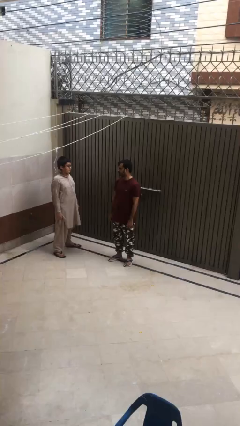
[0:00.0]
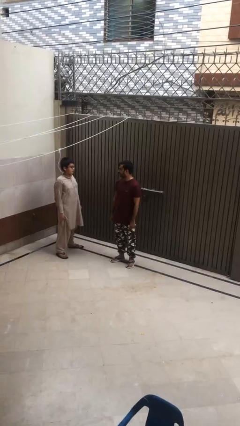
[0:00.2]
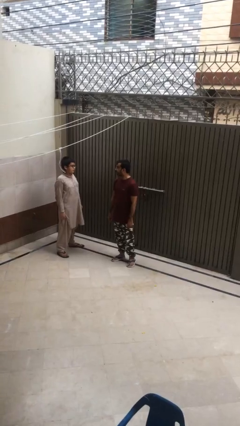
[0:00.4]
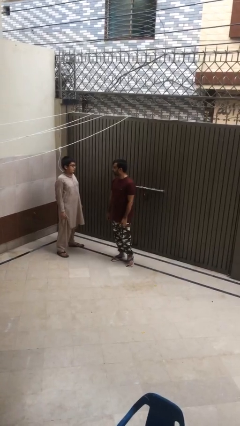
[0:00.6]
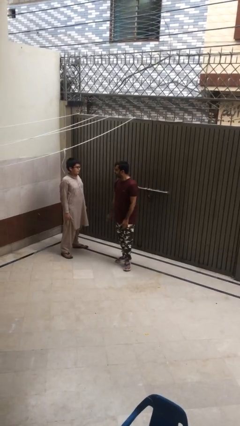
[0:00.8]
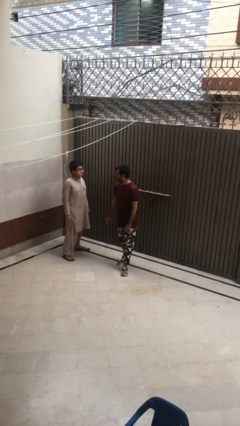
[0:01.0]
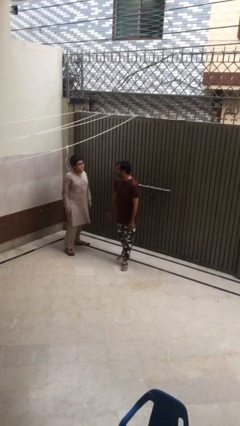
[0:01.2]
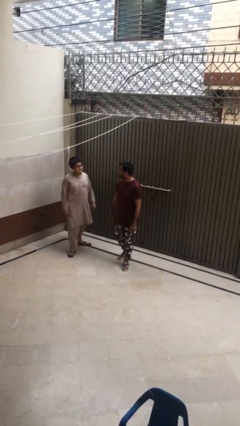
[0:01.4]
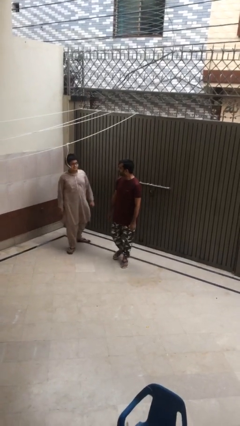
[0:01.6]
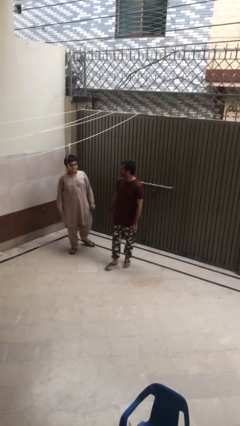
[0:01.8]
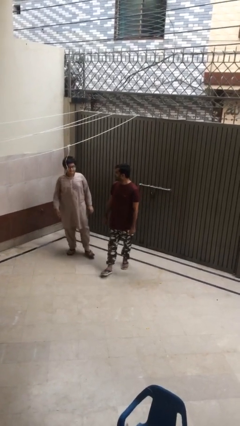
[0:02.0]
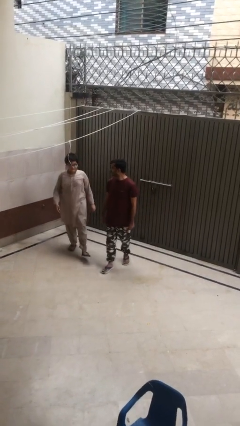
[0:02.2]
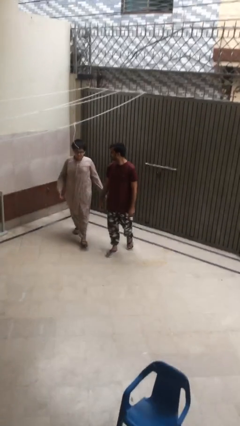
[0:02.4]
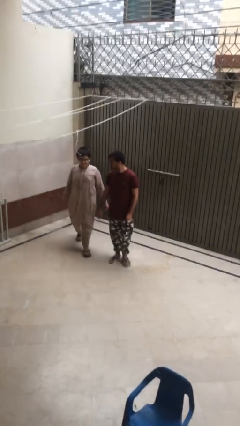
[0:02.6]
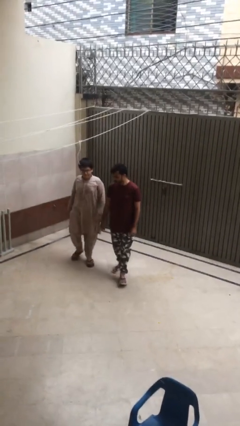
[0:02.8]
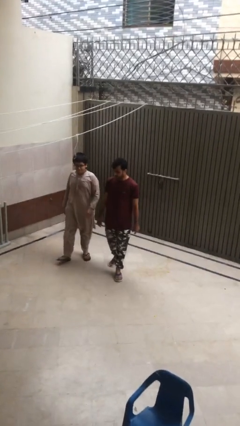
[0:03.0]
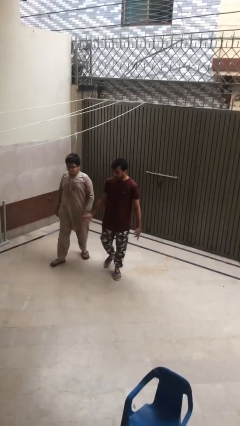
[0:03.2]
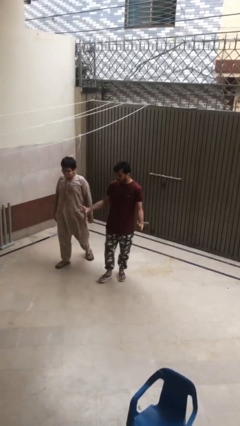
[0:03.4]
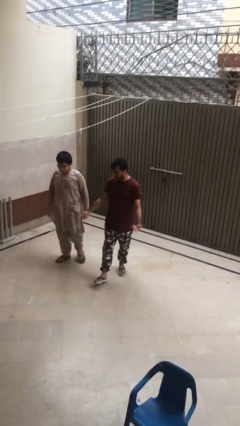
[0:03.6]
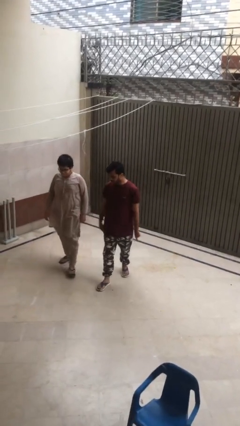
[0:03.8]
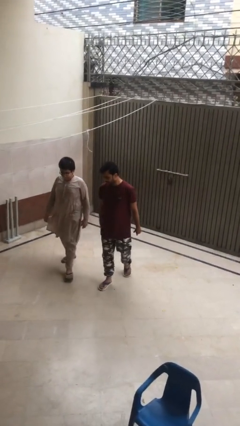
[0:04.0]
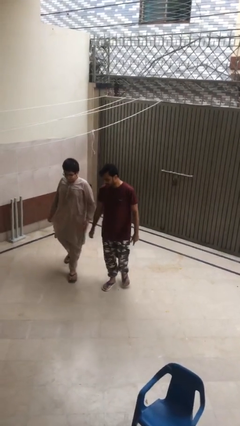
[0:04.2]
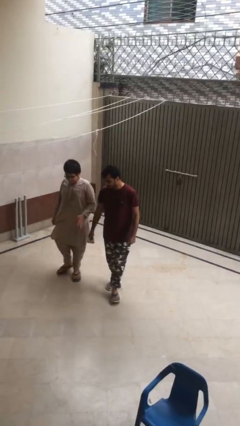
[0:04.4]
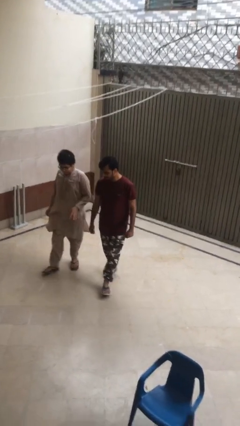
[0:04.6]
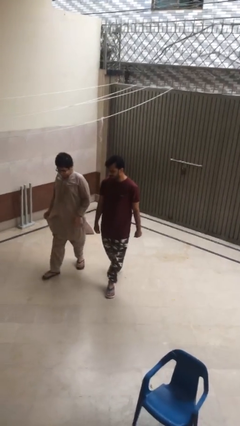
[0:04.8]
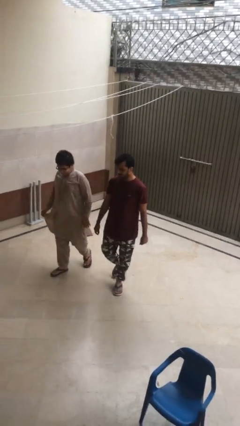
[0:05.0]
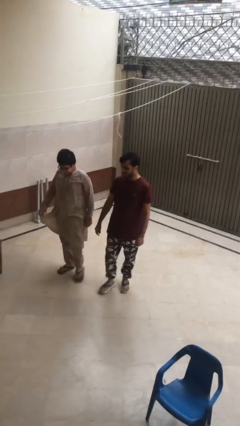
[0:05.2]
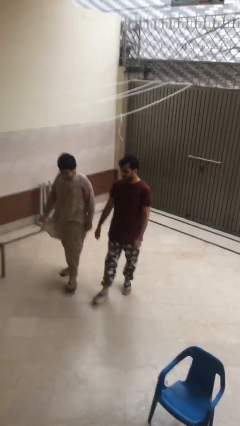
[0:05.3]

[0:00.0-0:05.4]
person talks to person

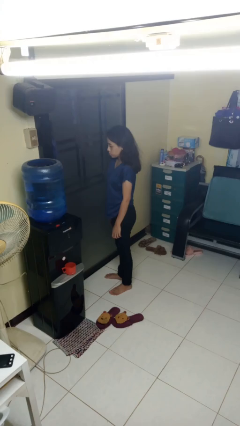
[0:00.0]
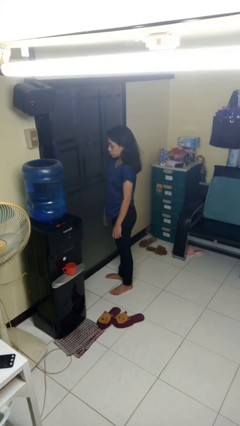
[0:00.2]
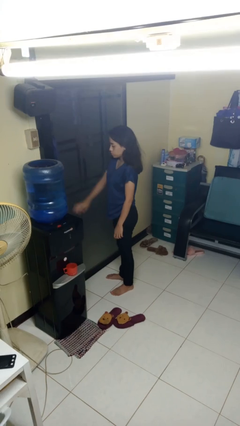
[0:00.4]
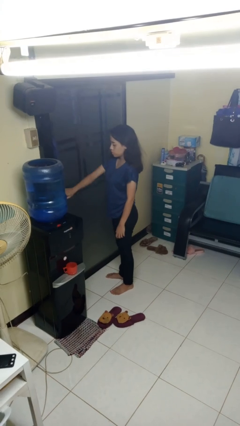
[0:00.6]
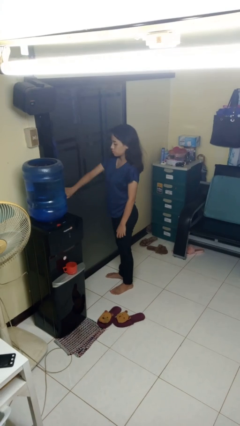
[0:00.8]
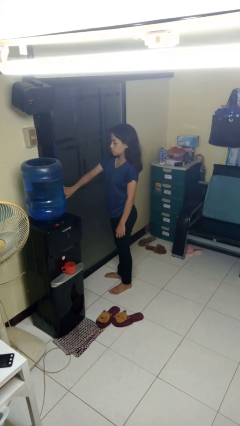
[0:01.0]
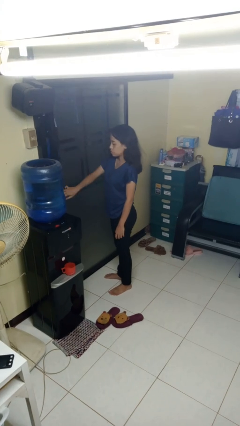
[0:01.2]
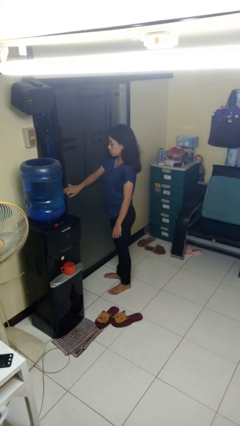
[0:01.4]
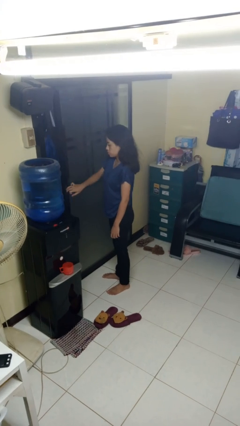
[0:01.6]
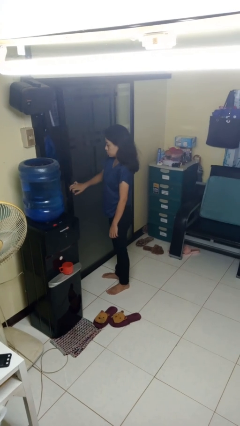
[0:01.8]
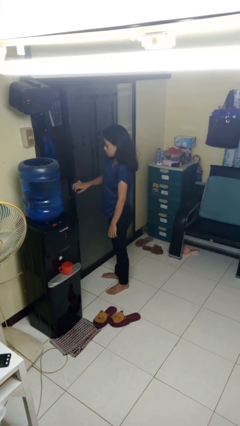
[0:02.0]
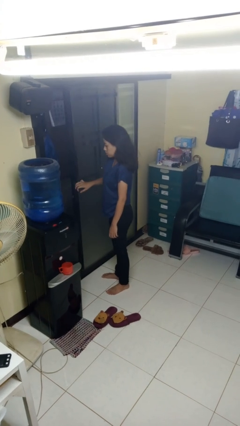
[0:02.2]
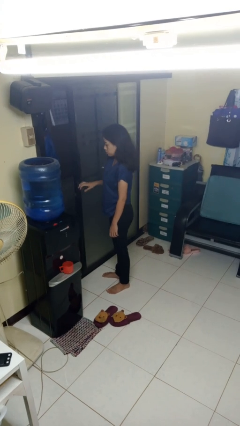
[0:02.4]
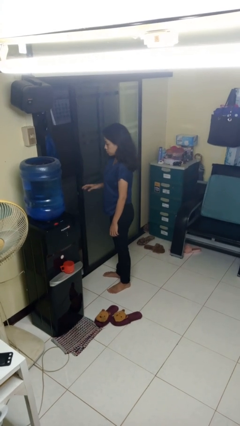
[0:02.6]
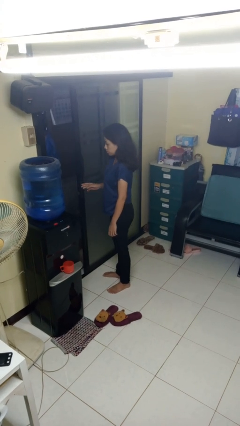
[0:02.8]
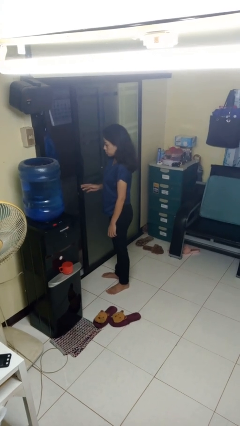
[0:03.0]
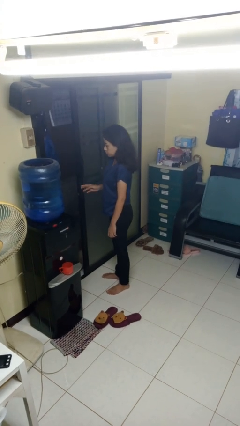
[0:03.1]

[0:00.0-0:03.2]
person opens sliding door

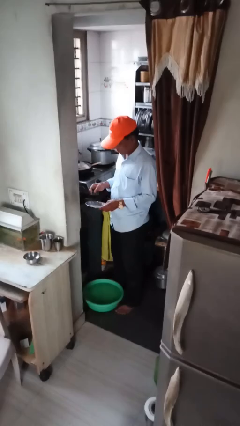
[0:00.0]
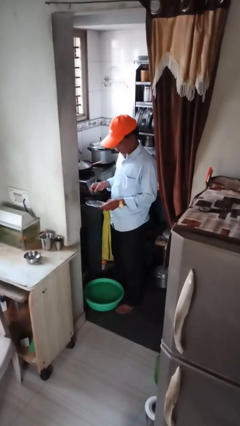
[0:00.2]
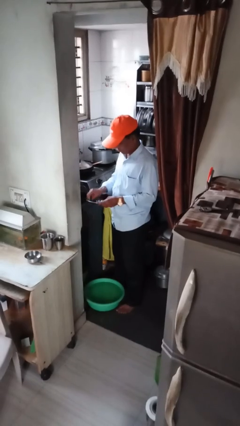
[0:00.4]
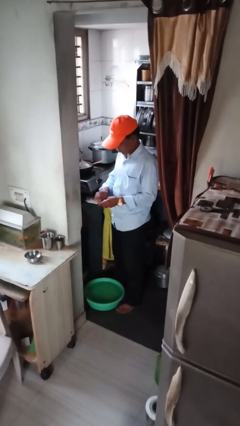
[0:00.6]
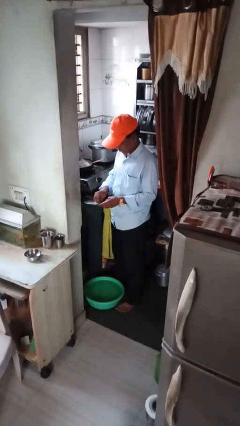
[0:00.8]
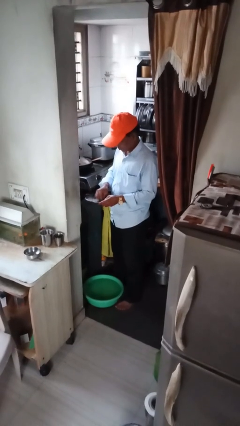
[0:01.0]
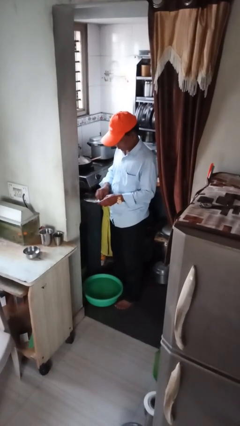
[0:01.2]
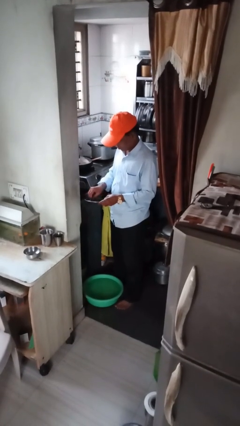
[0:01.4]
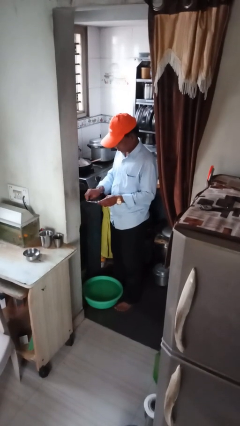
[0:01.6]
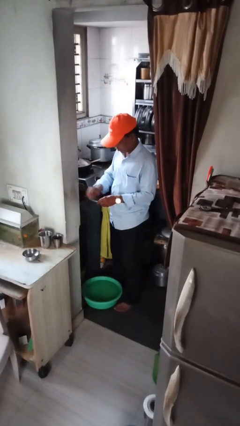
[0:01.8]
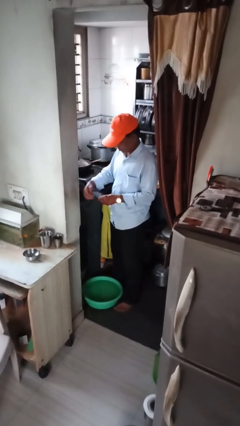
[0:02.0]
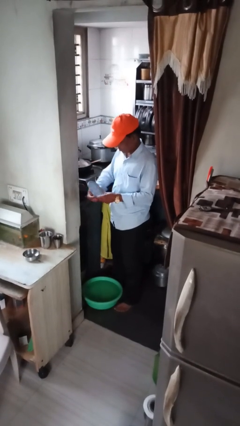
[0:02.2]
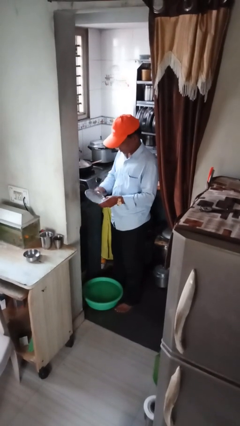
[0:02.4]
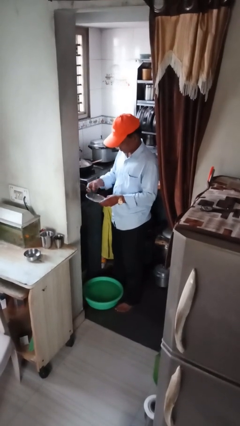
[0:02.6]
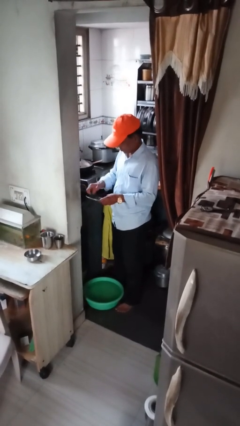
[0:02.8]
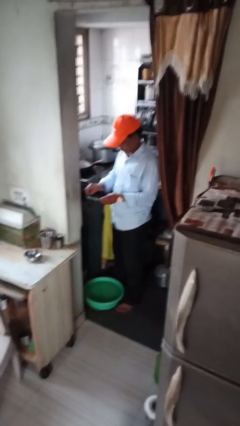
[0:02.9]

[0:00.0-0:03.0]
person washes dish

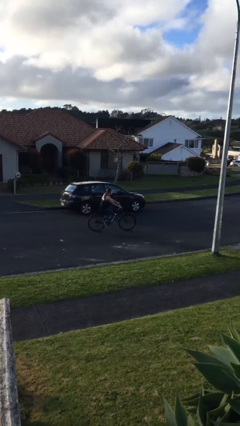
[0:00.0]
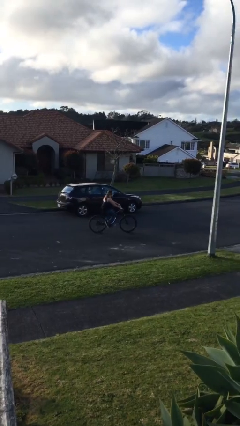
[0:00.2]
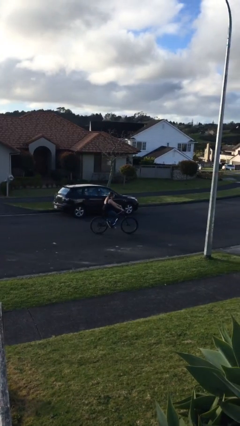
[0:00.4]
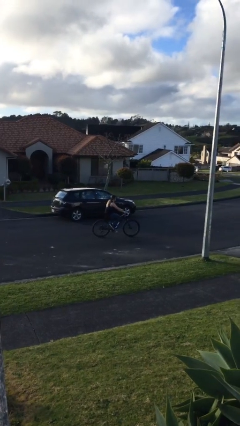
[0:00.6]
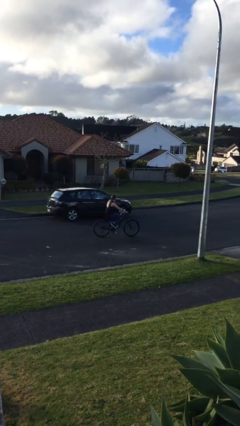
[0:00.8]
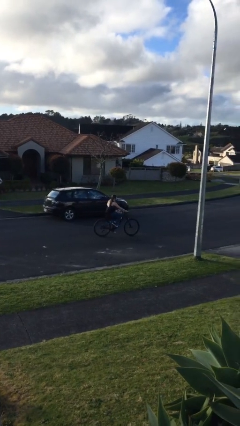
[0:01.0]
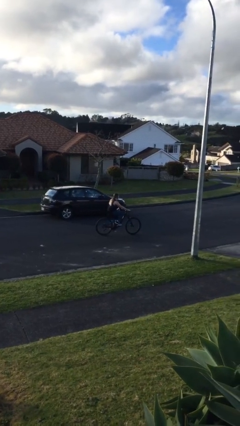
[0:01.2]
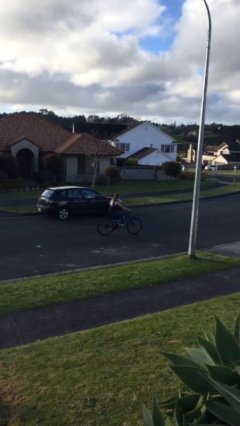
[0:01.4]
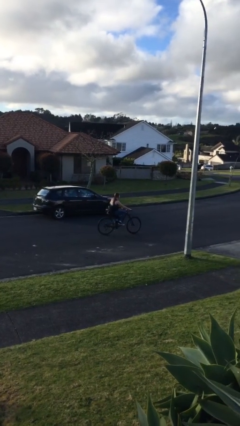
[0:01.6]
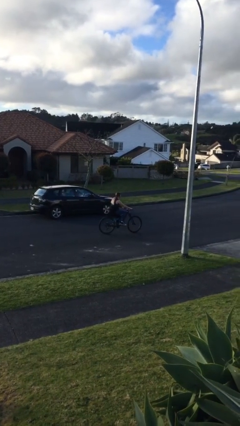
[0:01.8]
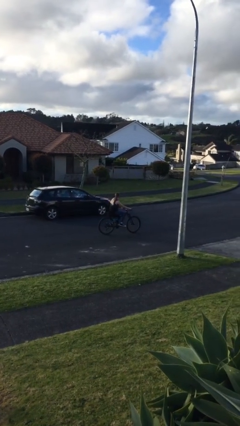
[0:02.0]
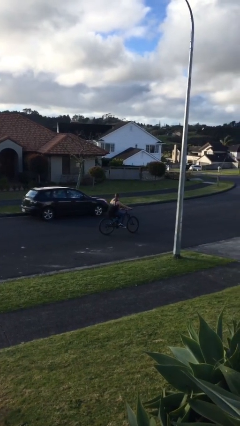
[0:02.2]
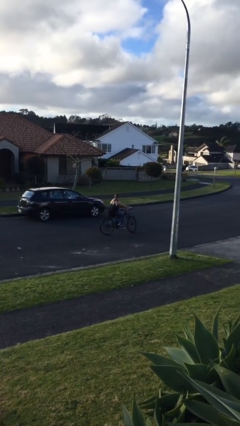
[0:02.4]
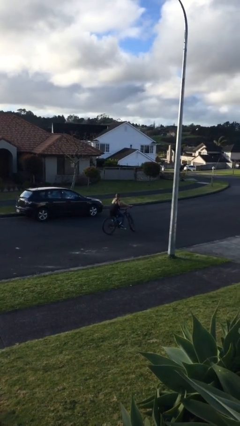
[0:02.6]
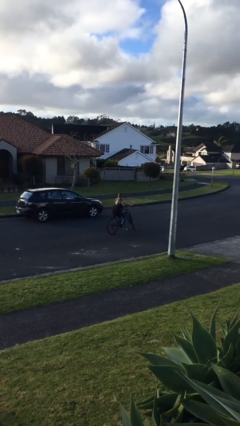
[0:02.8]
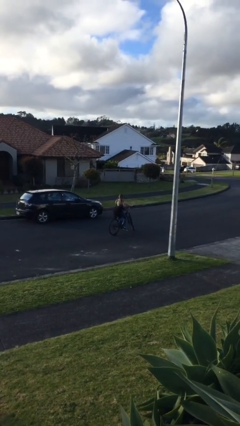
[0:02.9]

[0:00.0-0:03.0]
person rides bicycle

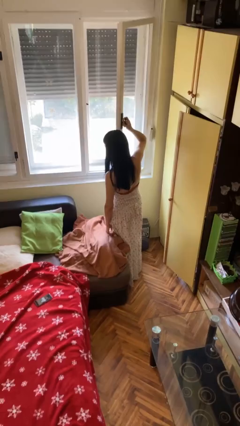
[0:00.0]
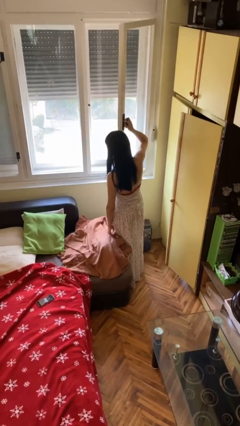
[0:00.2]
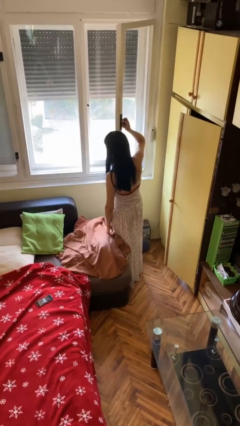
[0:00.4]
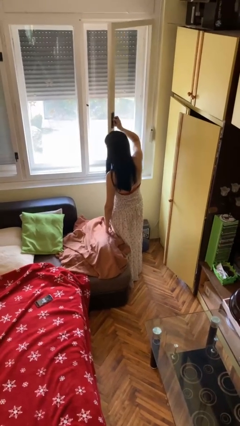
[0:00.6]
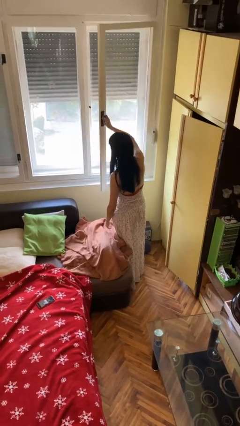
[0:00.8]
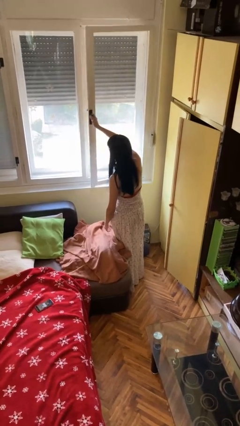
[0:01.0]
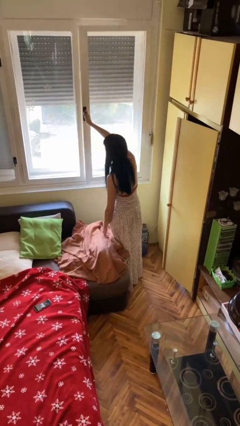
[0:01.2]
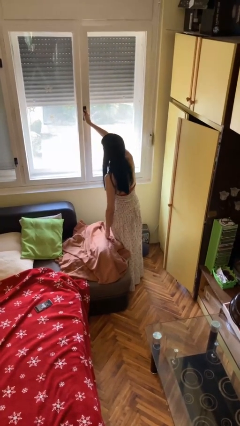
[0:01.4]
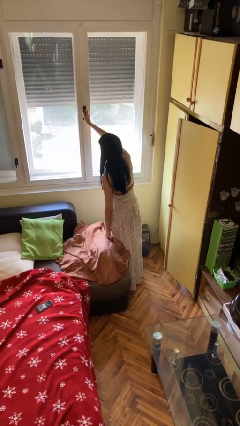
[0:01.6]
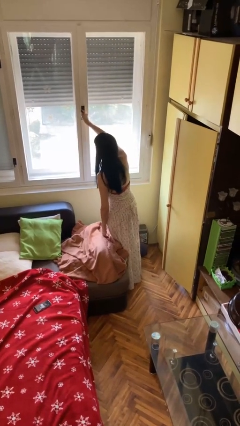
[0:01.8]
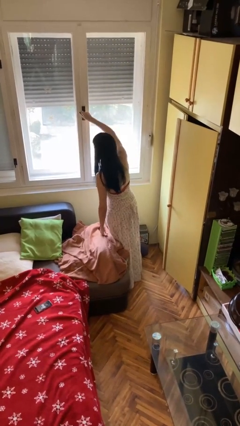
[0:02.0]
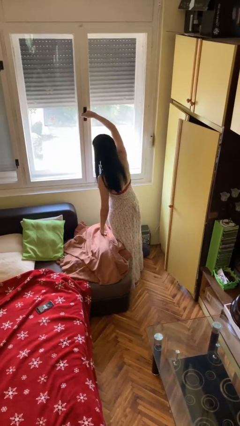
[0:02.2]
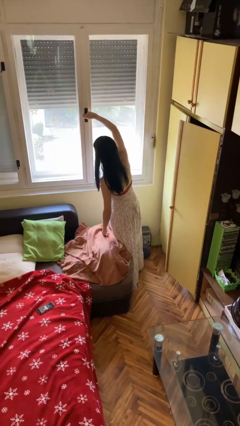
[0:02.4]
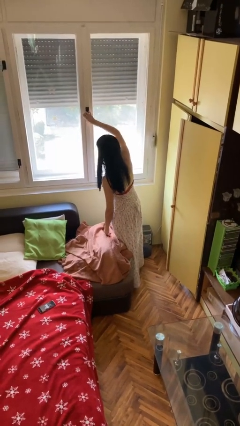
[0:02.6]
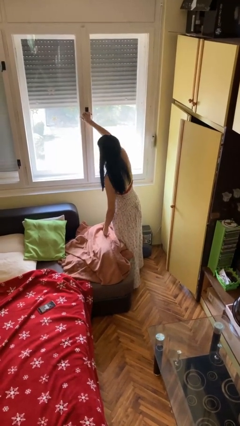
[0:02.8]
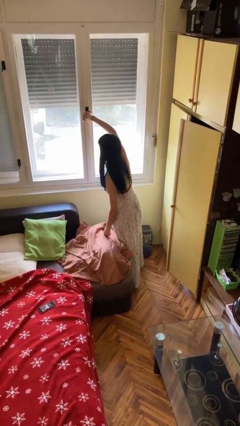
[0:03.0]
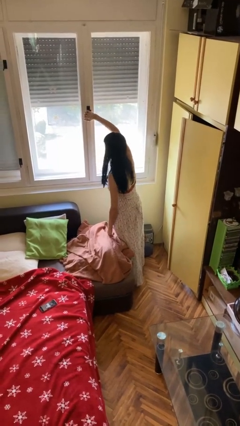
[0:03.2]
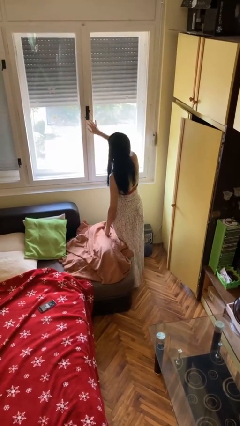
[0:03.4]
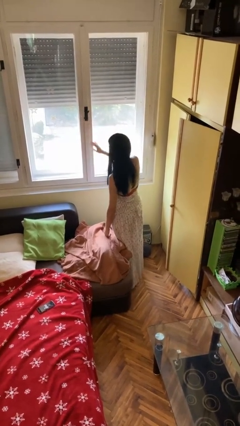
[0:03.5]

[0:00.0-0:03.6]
person closes microwave
